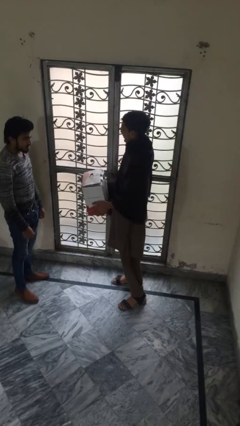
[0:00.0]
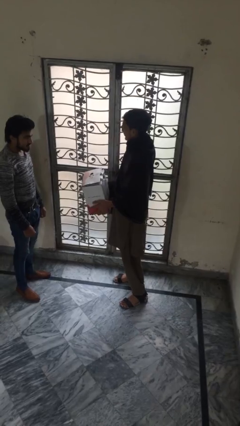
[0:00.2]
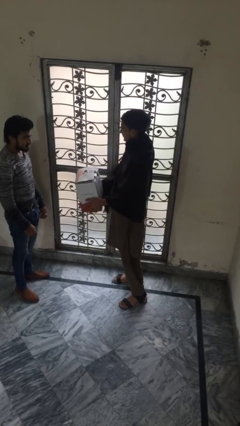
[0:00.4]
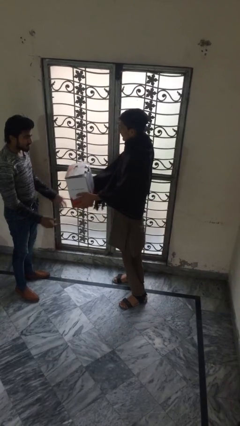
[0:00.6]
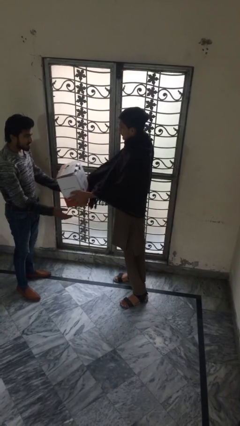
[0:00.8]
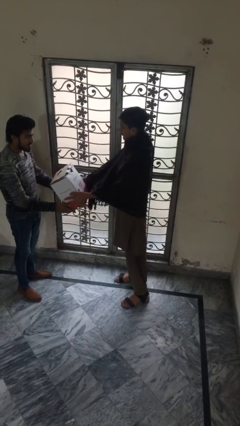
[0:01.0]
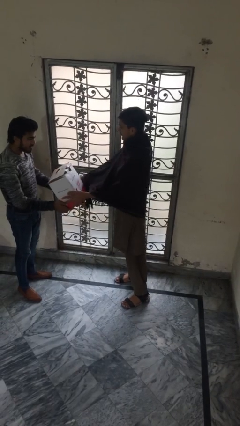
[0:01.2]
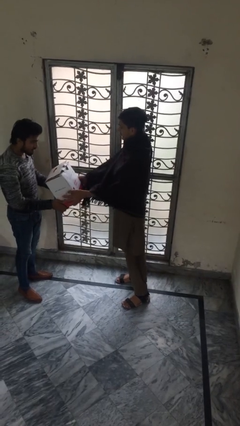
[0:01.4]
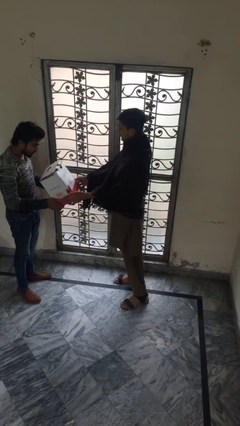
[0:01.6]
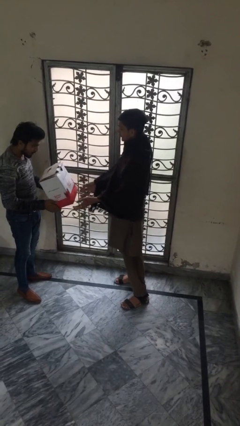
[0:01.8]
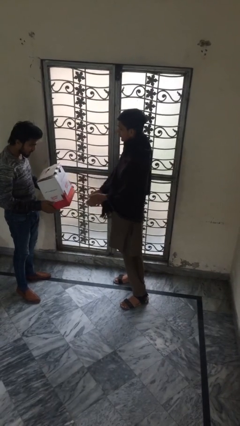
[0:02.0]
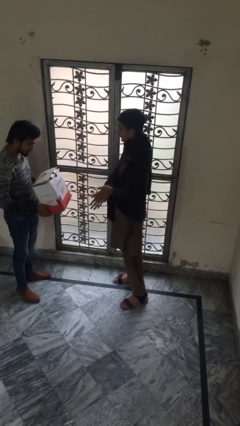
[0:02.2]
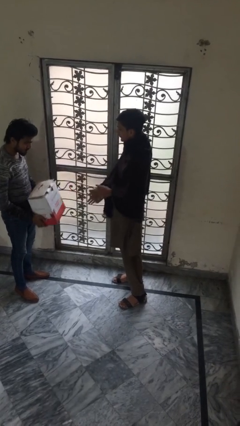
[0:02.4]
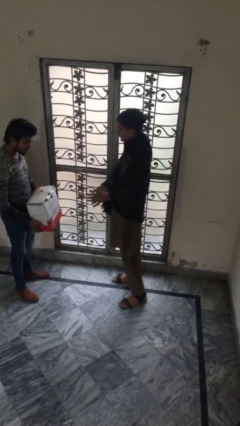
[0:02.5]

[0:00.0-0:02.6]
person transfers object to person

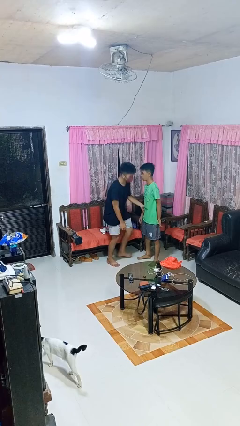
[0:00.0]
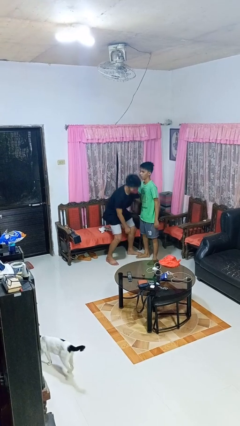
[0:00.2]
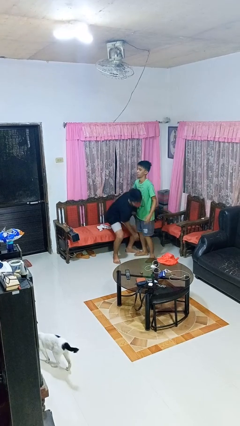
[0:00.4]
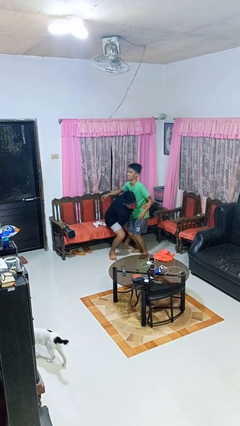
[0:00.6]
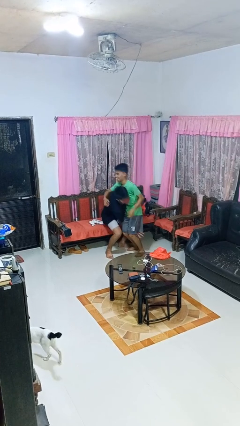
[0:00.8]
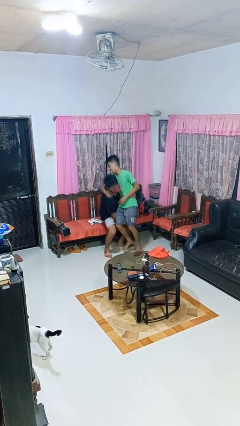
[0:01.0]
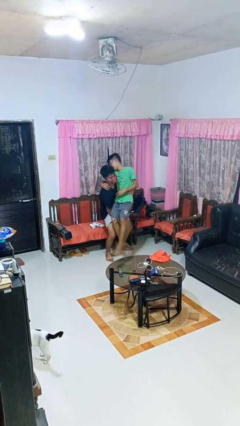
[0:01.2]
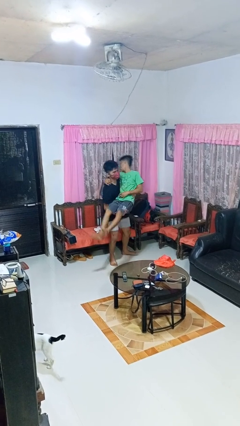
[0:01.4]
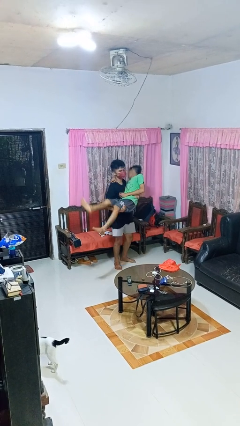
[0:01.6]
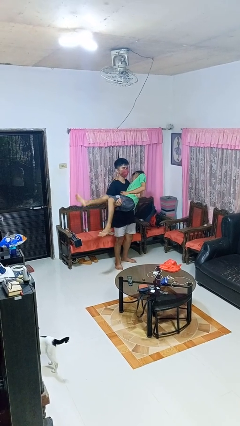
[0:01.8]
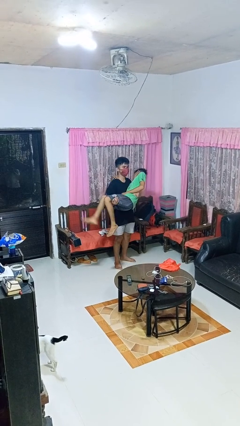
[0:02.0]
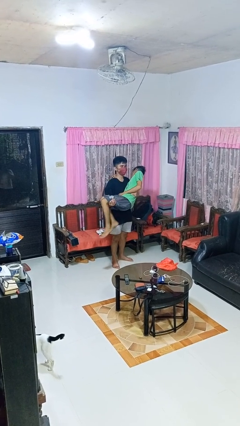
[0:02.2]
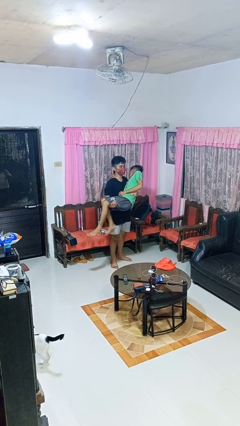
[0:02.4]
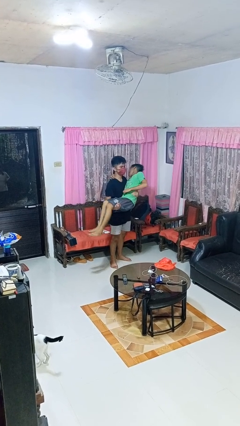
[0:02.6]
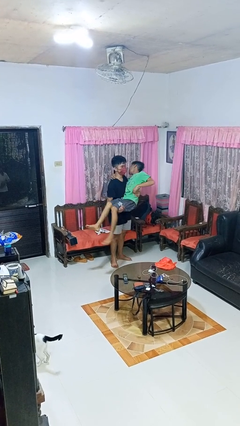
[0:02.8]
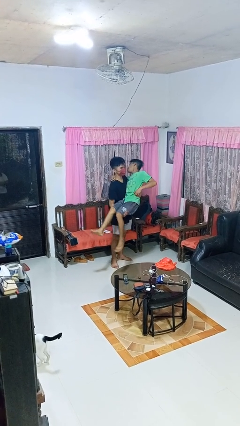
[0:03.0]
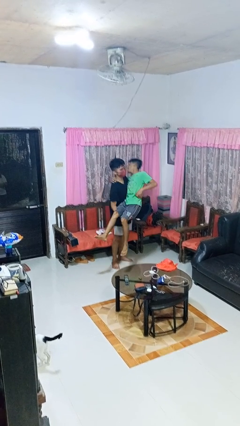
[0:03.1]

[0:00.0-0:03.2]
person picks up person

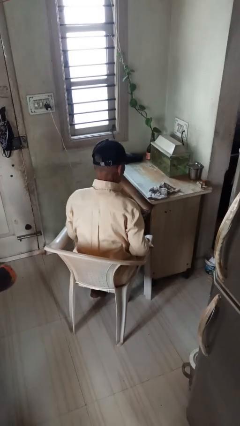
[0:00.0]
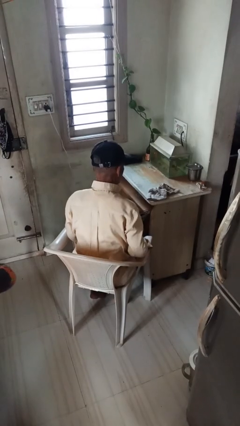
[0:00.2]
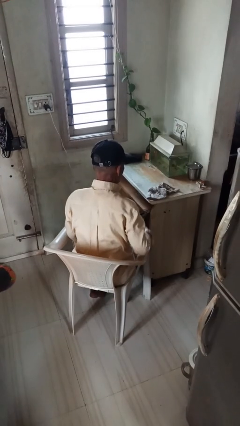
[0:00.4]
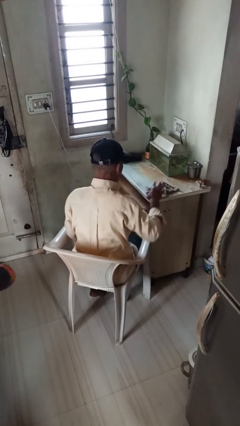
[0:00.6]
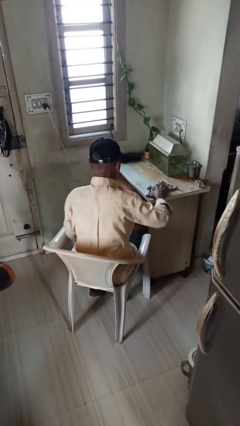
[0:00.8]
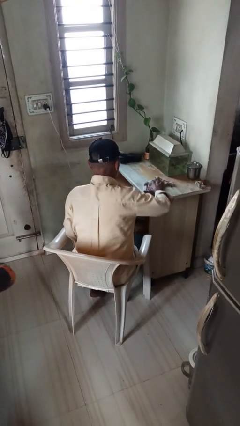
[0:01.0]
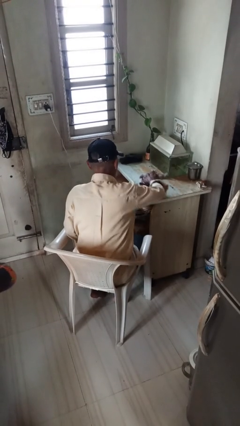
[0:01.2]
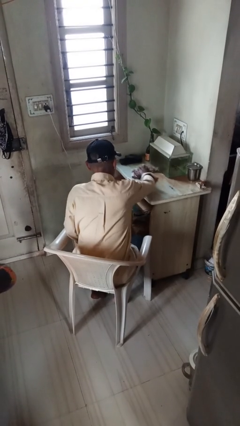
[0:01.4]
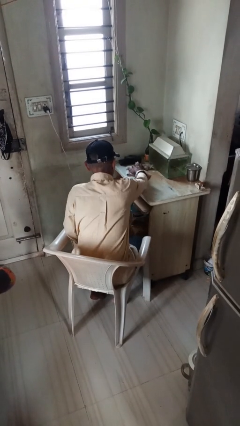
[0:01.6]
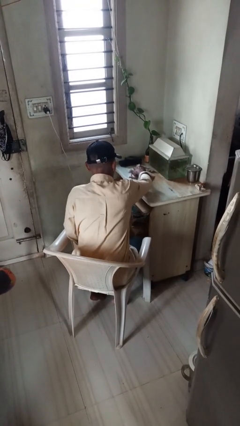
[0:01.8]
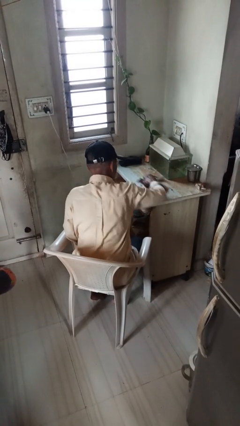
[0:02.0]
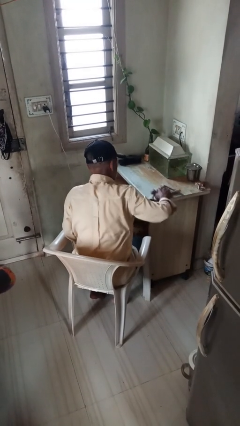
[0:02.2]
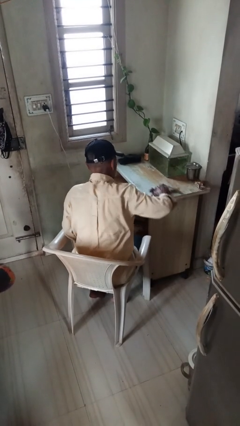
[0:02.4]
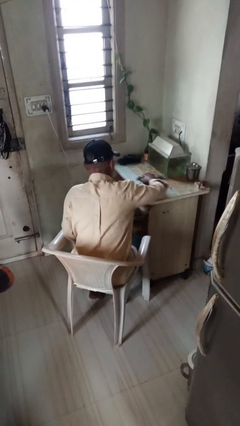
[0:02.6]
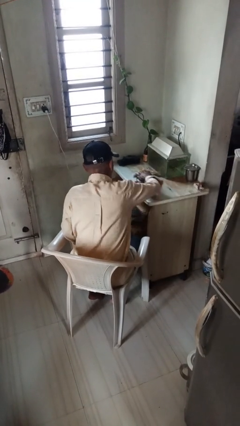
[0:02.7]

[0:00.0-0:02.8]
person cleans table with rag

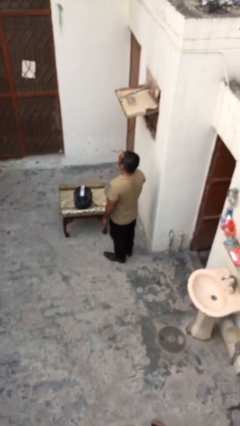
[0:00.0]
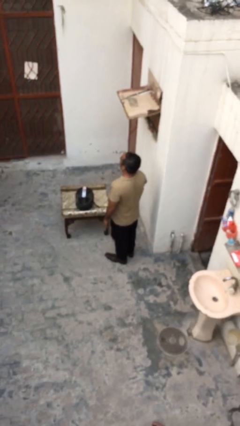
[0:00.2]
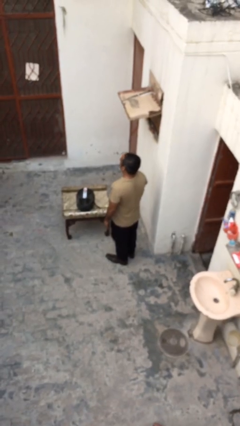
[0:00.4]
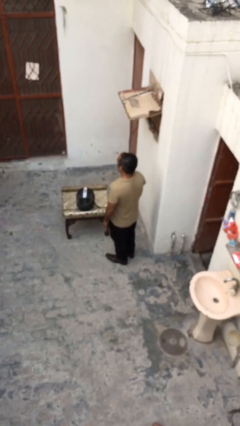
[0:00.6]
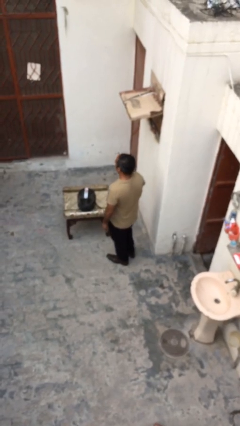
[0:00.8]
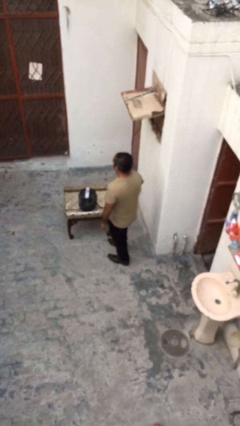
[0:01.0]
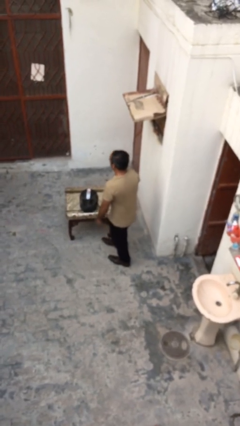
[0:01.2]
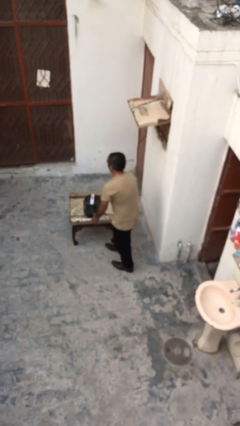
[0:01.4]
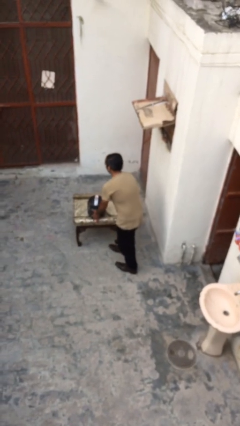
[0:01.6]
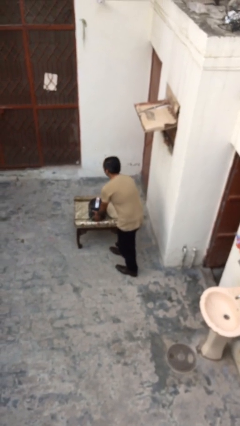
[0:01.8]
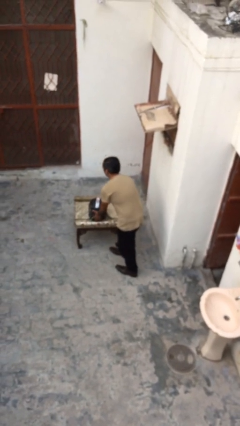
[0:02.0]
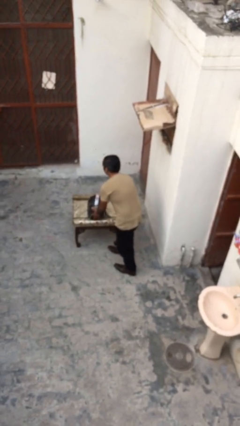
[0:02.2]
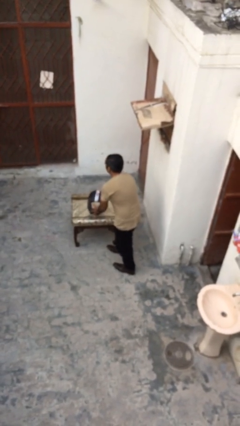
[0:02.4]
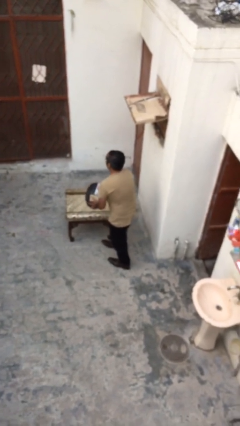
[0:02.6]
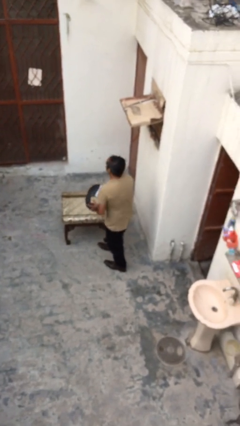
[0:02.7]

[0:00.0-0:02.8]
person picks up object from table

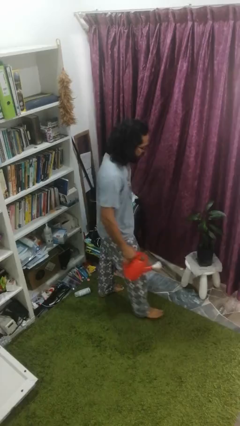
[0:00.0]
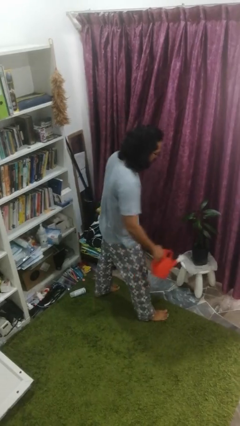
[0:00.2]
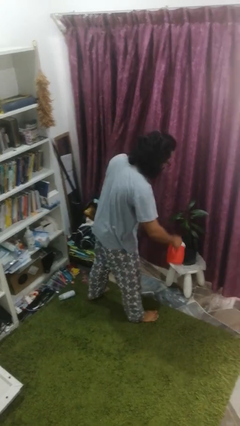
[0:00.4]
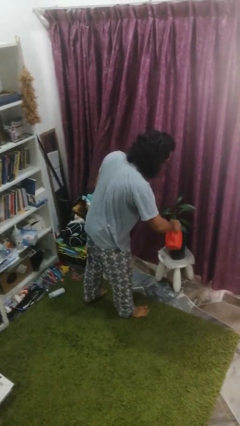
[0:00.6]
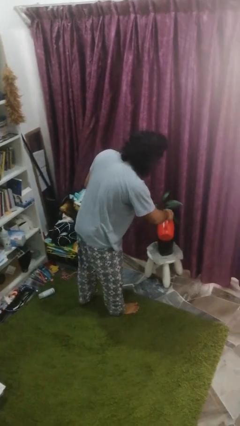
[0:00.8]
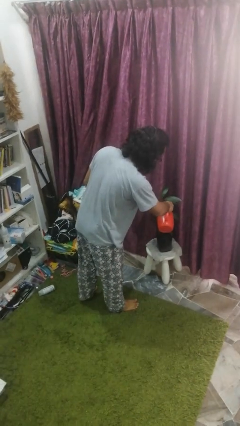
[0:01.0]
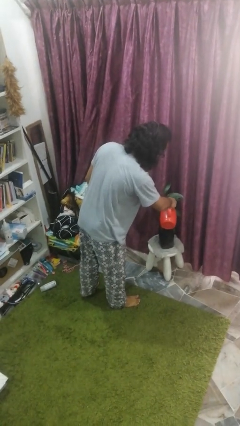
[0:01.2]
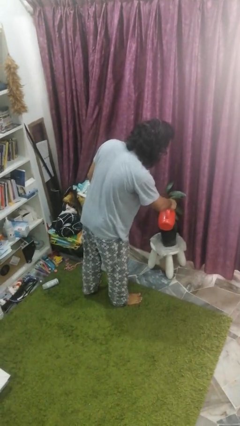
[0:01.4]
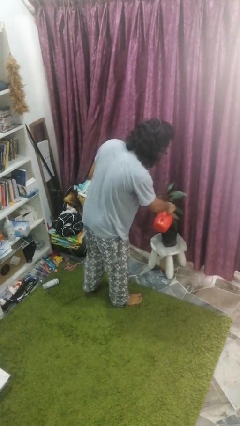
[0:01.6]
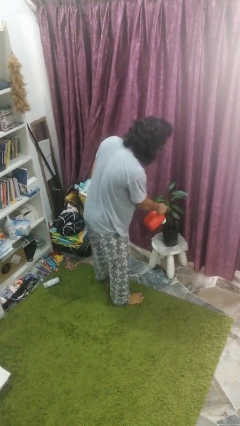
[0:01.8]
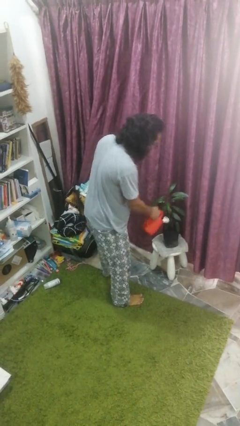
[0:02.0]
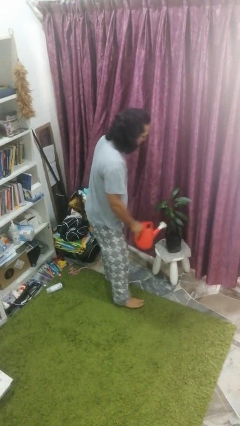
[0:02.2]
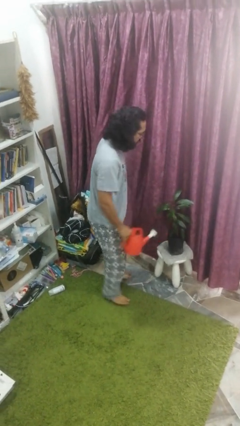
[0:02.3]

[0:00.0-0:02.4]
person waters houseplant

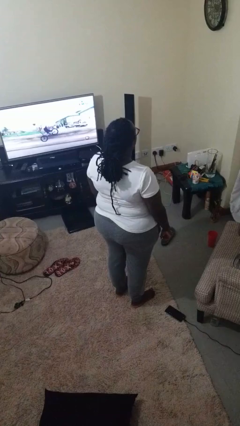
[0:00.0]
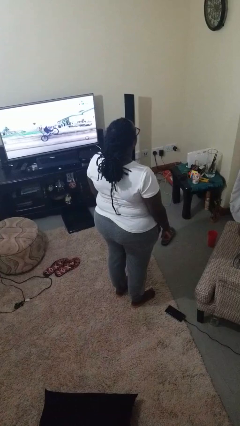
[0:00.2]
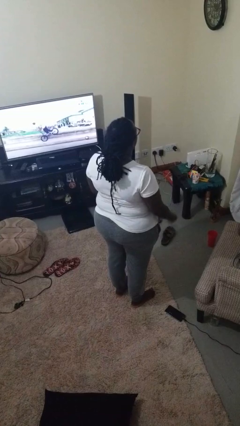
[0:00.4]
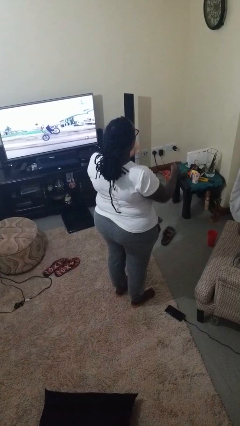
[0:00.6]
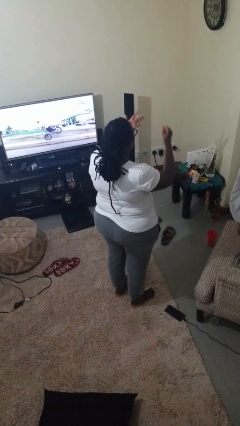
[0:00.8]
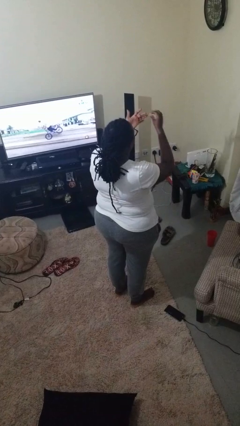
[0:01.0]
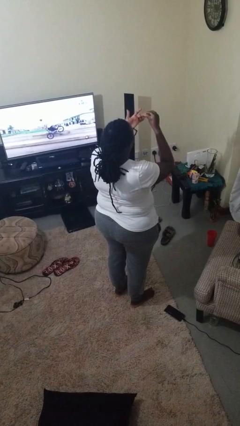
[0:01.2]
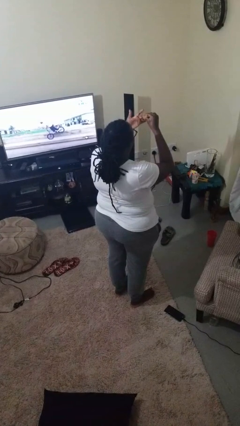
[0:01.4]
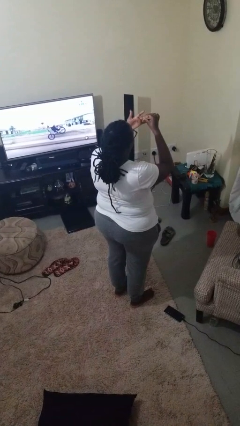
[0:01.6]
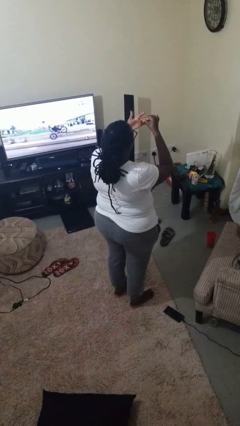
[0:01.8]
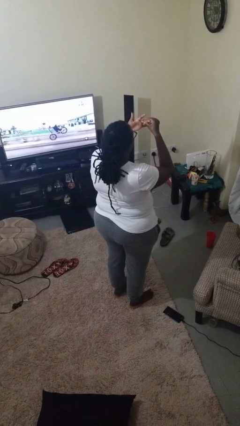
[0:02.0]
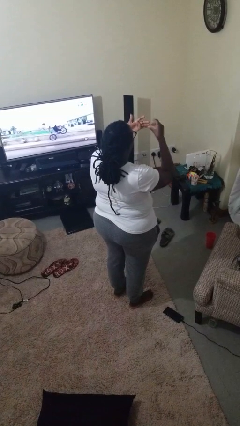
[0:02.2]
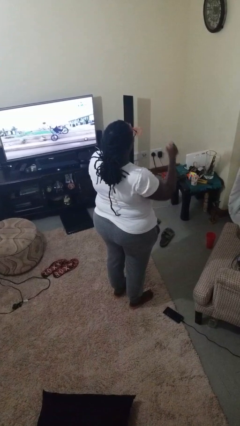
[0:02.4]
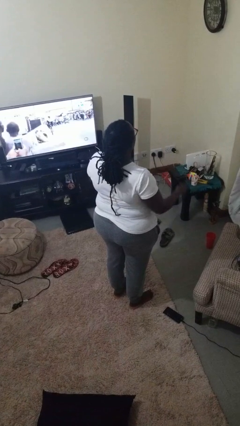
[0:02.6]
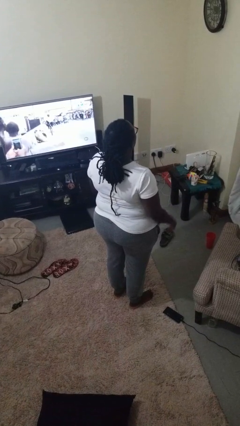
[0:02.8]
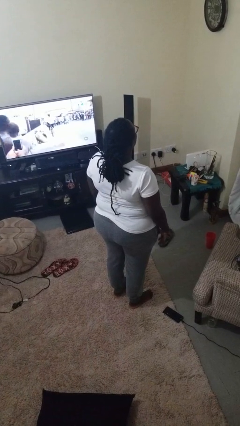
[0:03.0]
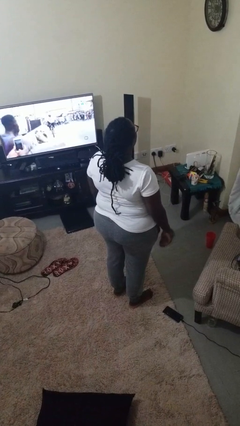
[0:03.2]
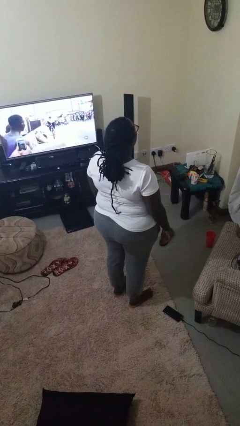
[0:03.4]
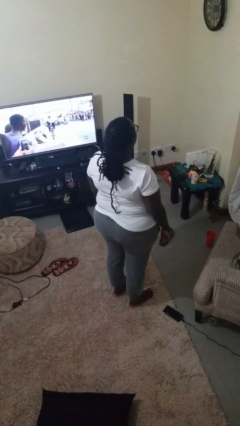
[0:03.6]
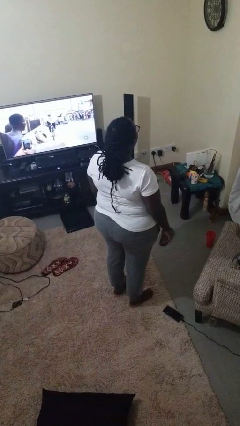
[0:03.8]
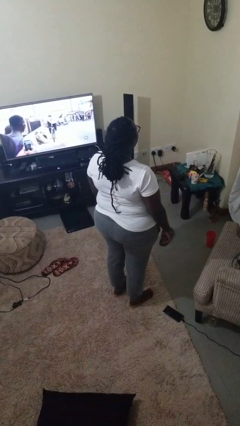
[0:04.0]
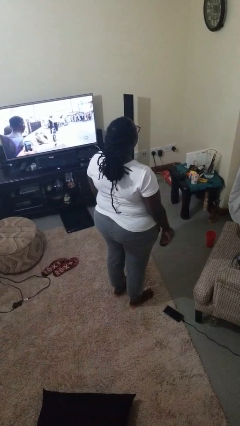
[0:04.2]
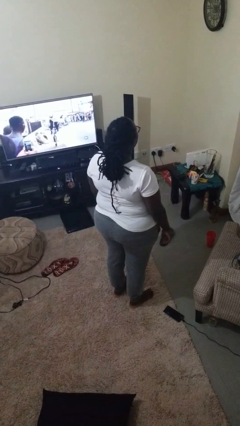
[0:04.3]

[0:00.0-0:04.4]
person puts on ring
